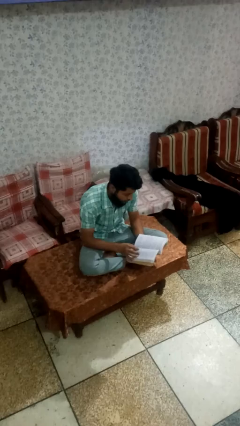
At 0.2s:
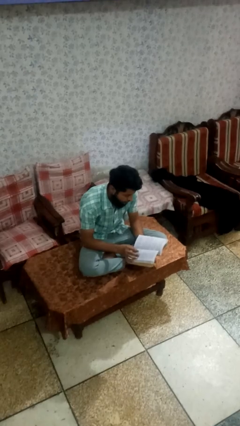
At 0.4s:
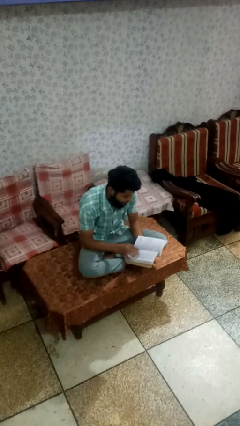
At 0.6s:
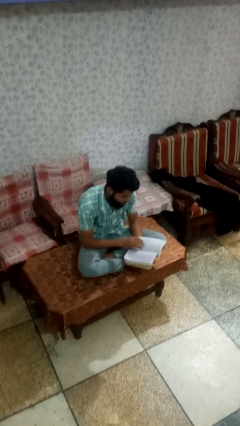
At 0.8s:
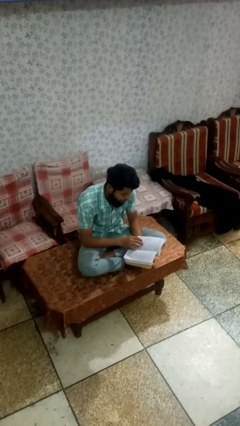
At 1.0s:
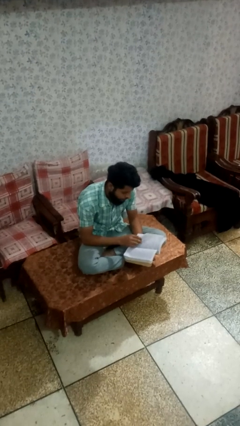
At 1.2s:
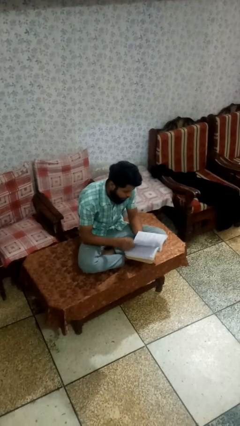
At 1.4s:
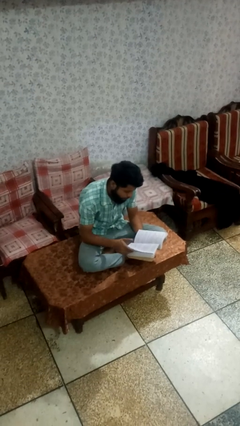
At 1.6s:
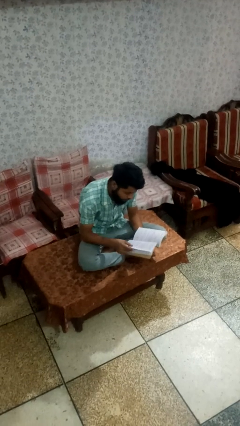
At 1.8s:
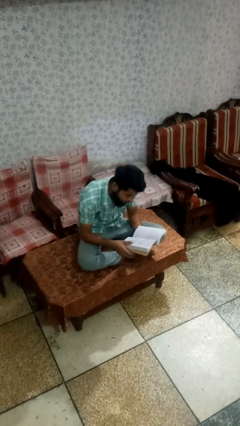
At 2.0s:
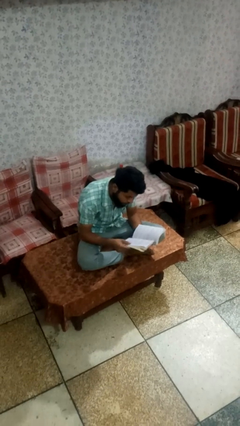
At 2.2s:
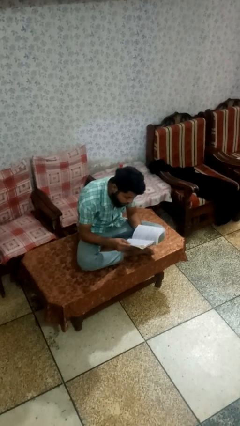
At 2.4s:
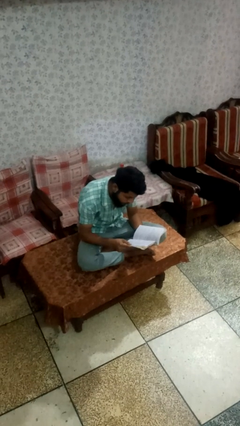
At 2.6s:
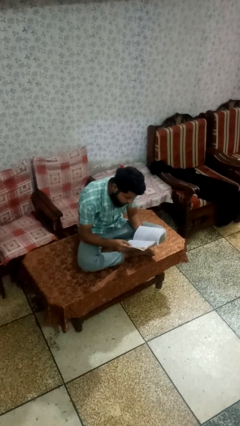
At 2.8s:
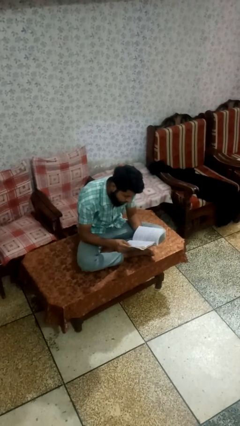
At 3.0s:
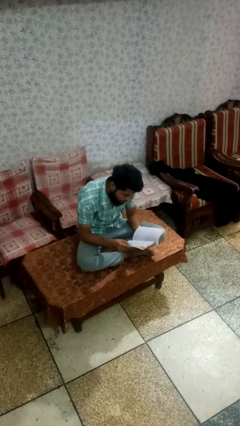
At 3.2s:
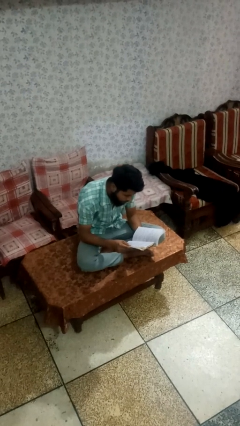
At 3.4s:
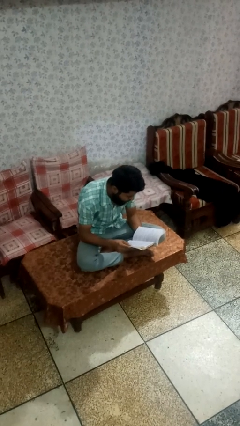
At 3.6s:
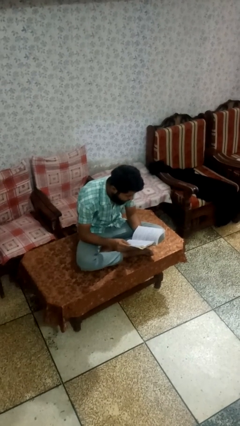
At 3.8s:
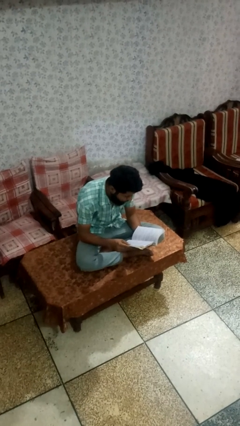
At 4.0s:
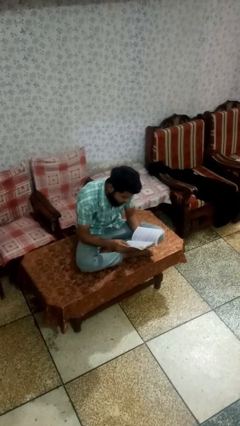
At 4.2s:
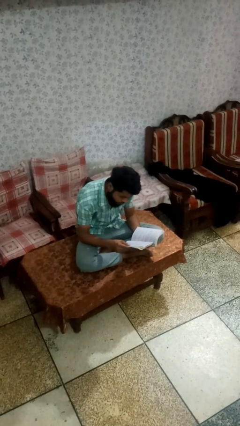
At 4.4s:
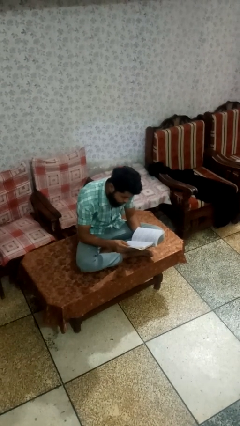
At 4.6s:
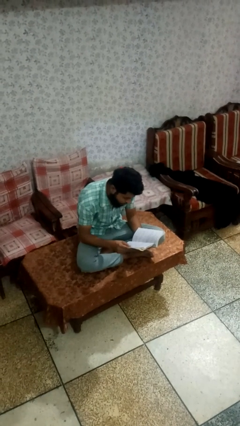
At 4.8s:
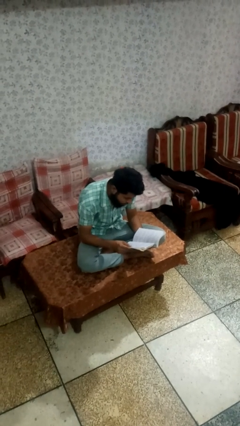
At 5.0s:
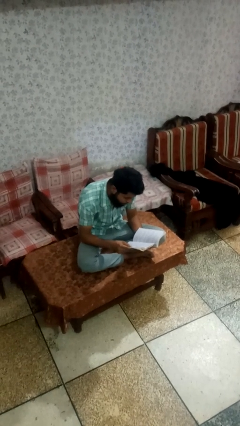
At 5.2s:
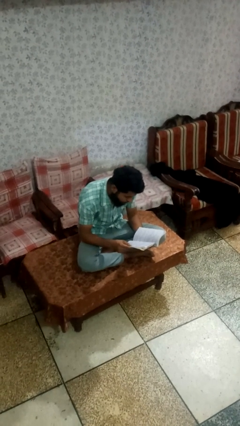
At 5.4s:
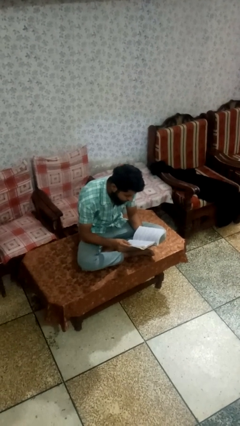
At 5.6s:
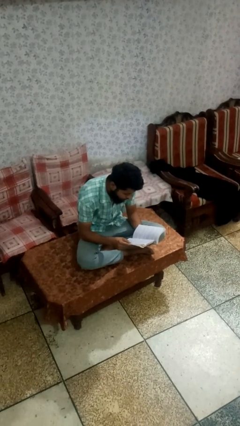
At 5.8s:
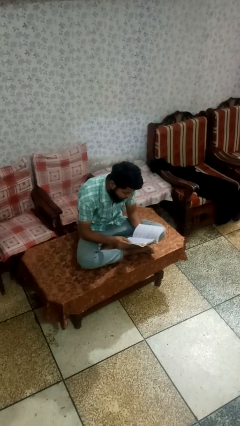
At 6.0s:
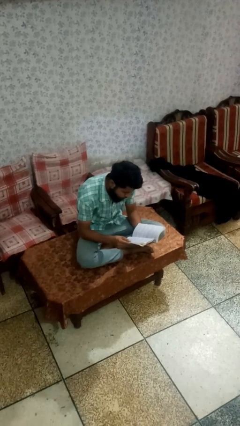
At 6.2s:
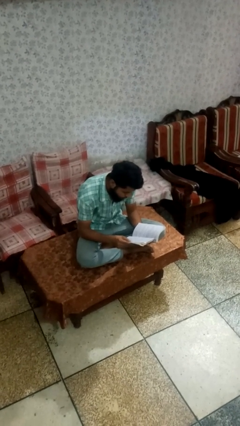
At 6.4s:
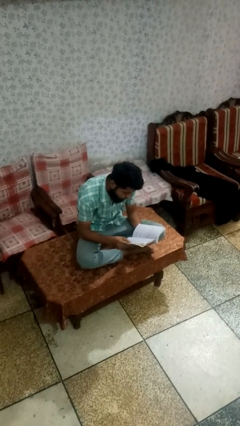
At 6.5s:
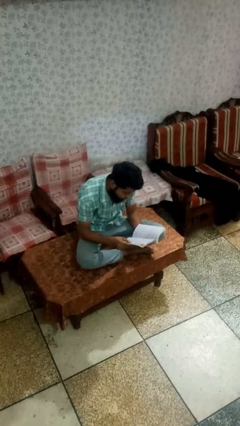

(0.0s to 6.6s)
person reads book

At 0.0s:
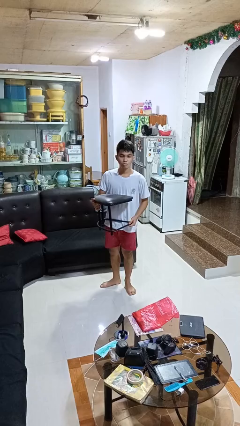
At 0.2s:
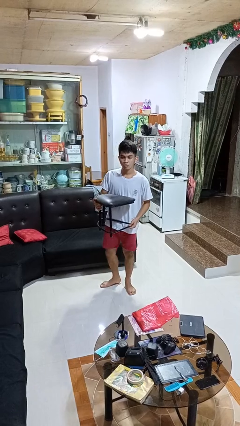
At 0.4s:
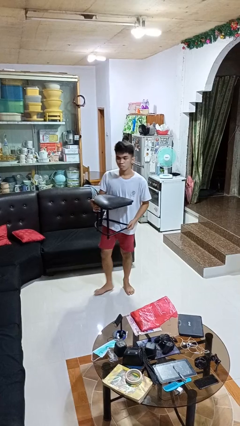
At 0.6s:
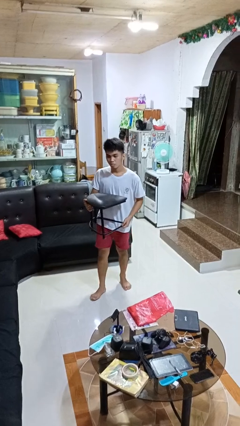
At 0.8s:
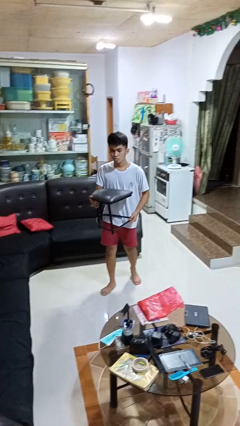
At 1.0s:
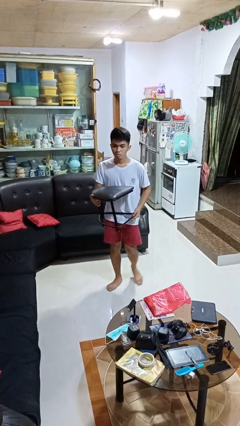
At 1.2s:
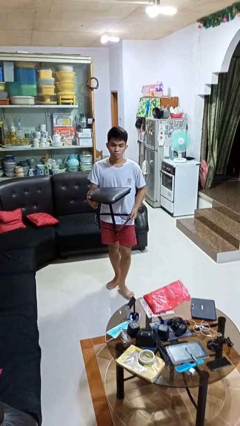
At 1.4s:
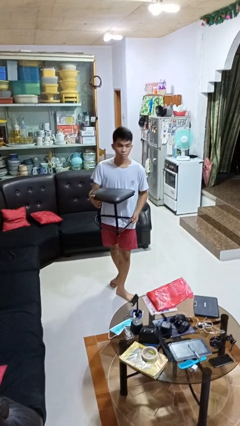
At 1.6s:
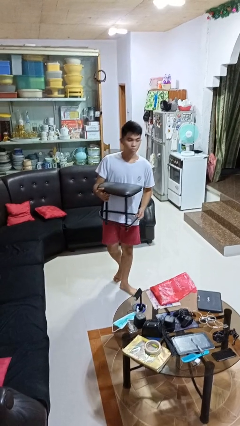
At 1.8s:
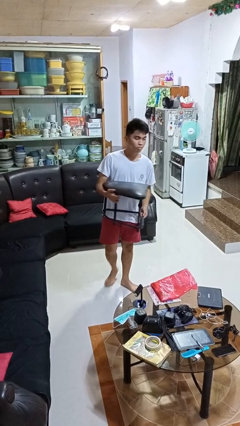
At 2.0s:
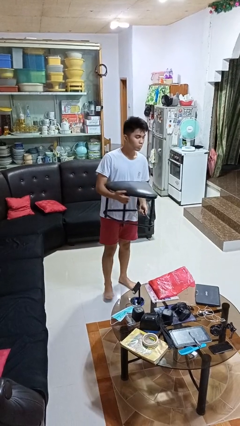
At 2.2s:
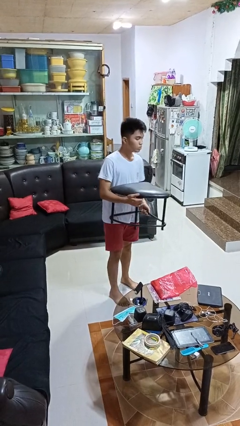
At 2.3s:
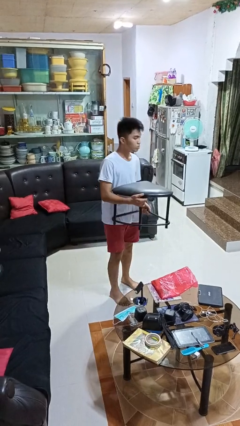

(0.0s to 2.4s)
person carries furniture

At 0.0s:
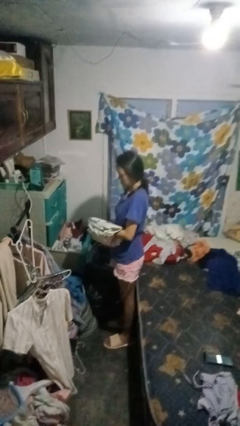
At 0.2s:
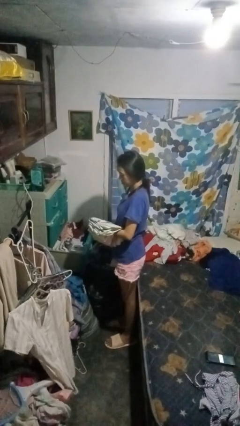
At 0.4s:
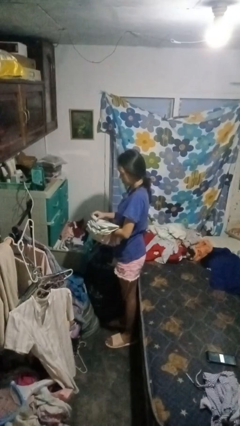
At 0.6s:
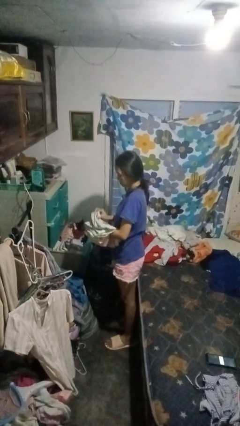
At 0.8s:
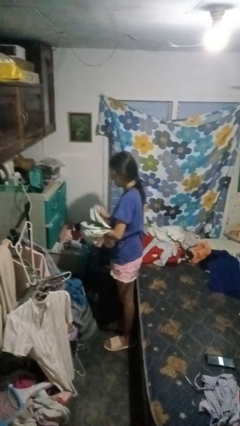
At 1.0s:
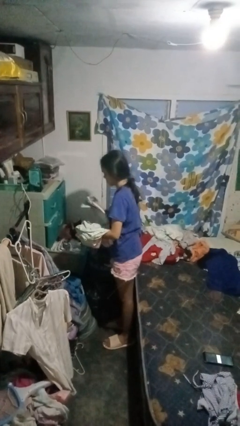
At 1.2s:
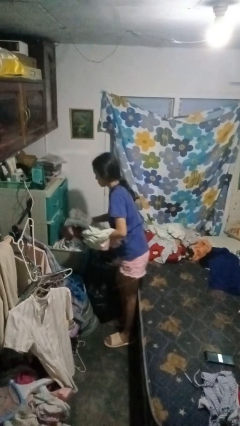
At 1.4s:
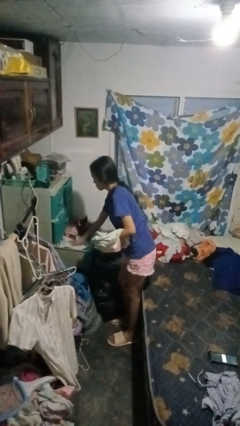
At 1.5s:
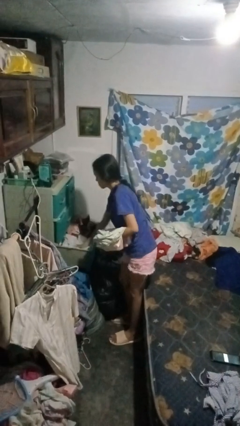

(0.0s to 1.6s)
person puts clothes into dresser

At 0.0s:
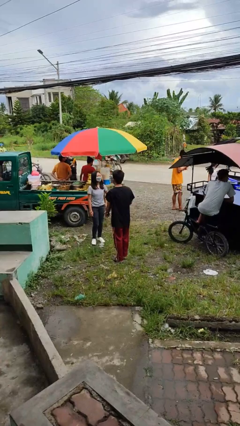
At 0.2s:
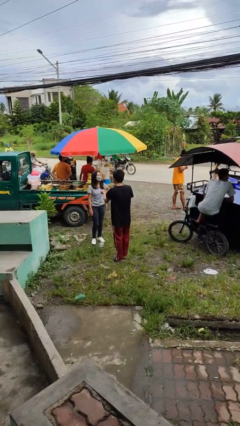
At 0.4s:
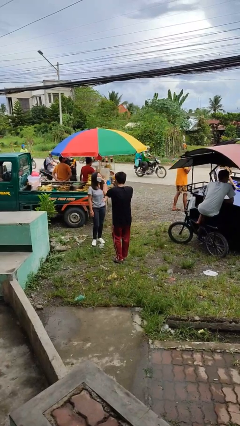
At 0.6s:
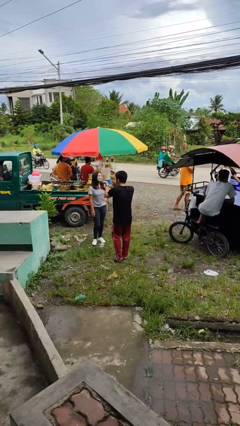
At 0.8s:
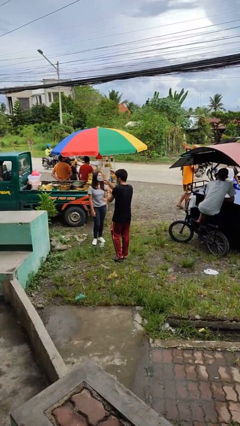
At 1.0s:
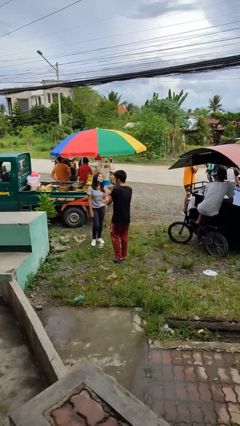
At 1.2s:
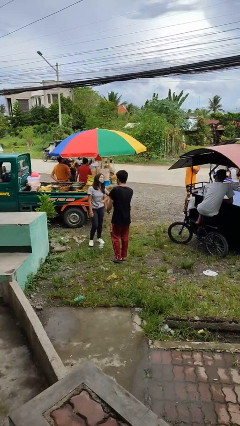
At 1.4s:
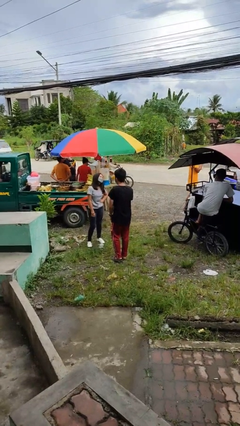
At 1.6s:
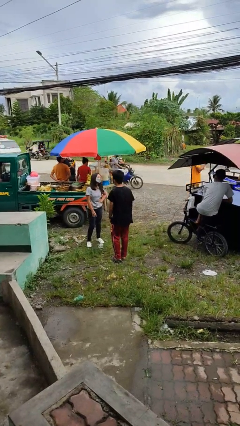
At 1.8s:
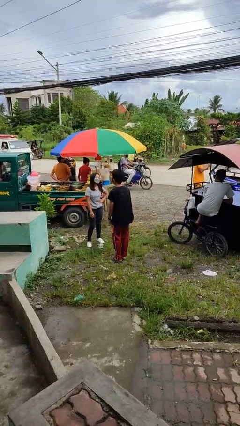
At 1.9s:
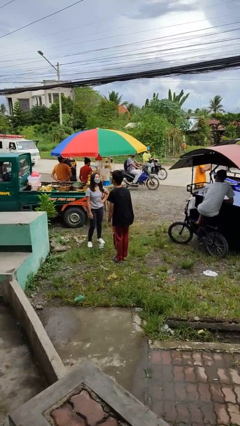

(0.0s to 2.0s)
person talks to person

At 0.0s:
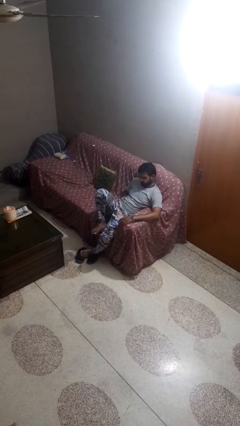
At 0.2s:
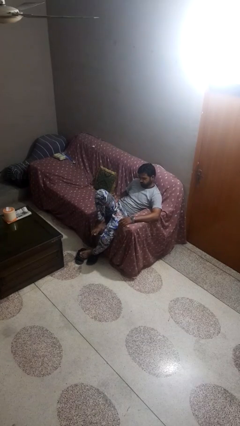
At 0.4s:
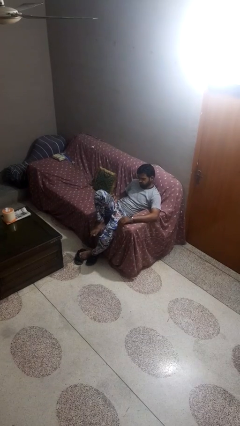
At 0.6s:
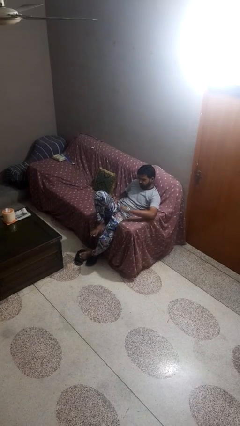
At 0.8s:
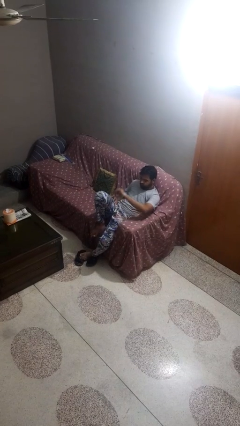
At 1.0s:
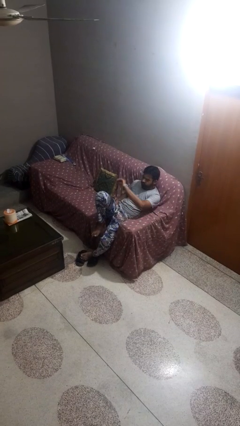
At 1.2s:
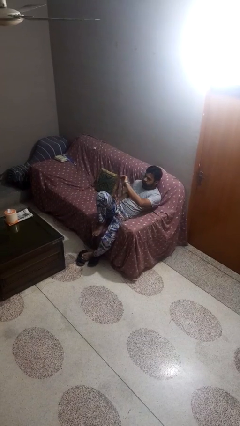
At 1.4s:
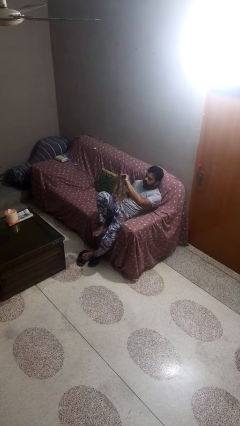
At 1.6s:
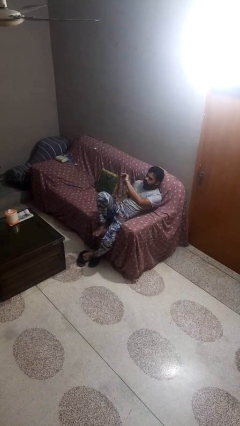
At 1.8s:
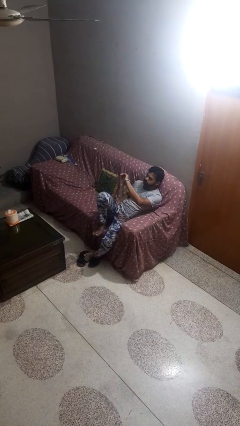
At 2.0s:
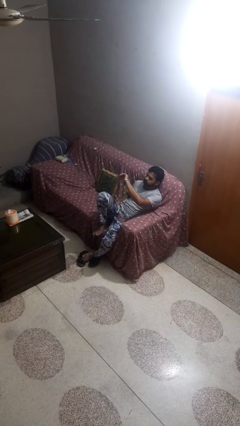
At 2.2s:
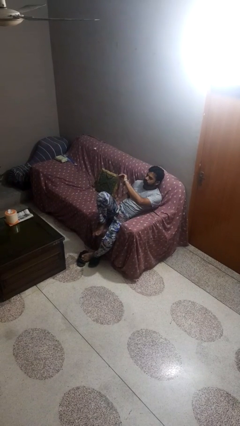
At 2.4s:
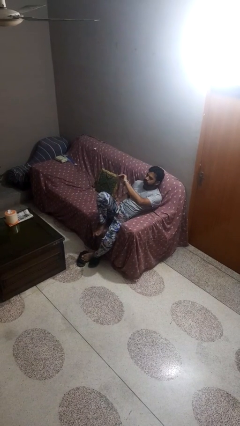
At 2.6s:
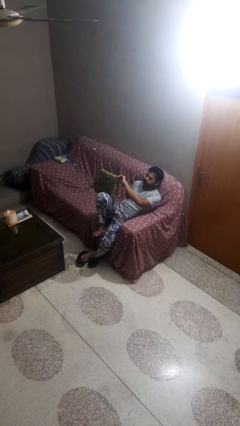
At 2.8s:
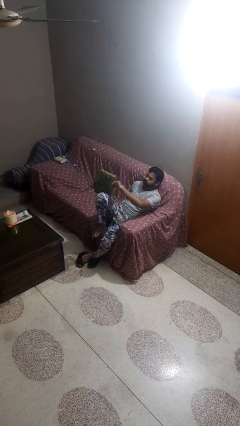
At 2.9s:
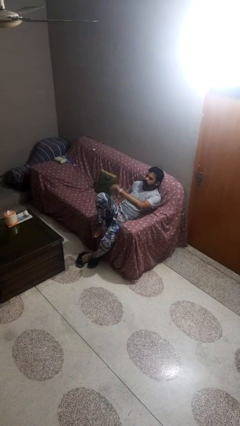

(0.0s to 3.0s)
person looks at wristwatch

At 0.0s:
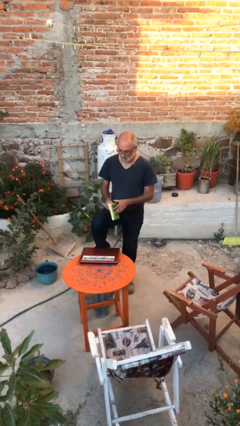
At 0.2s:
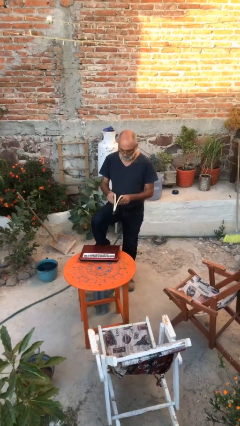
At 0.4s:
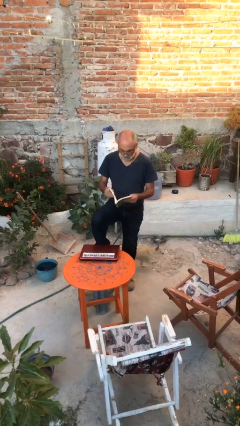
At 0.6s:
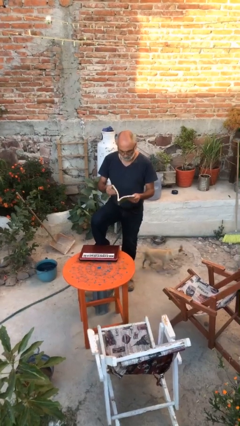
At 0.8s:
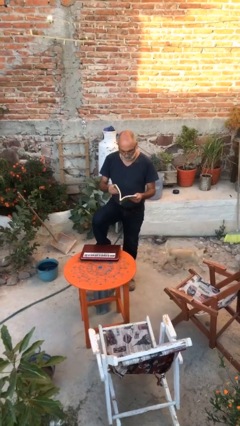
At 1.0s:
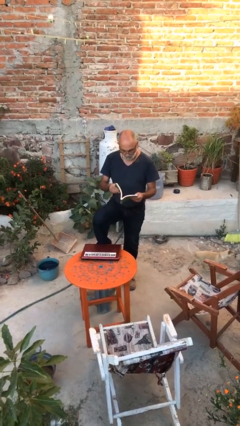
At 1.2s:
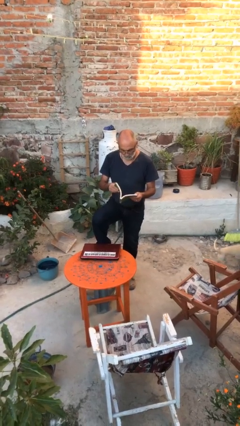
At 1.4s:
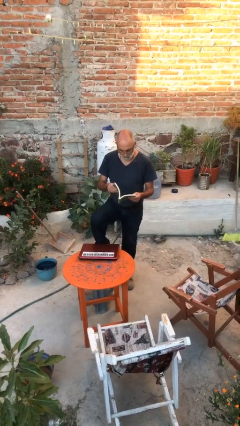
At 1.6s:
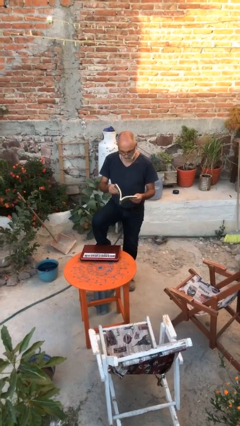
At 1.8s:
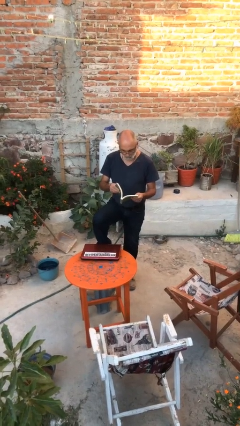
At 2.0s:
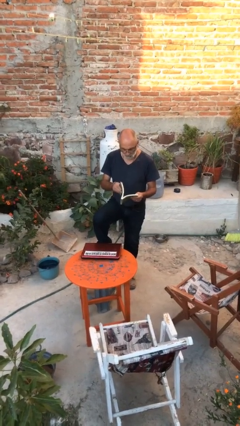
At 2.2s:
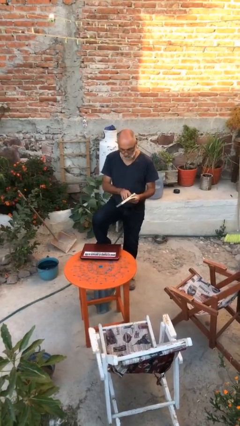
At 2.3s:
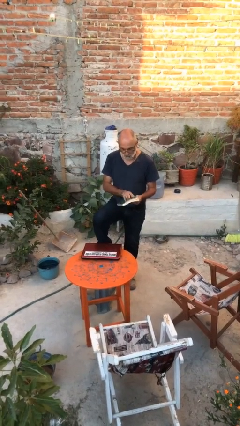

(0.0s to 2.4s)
person reads document
